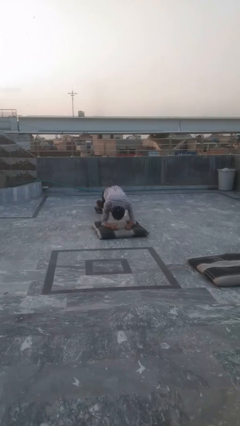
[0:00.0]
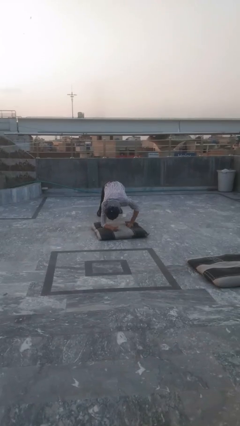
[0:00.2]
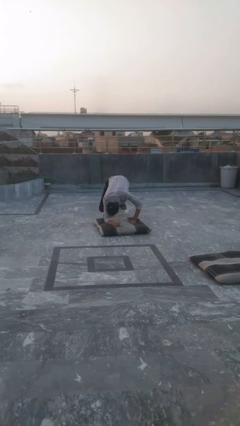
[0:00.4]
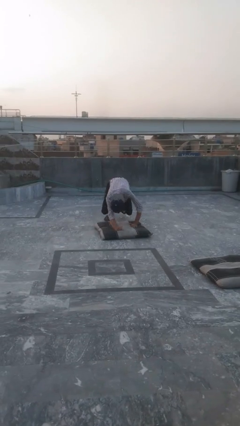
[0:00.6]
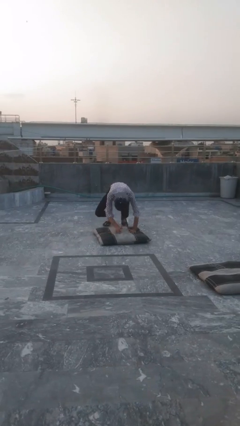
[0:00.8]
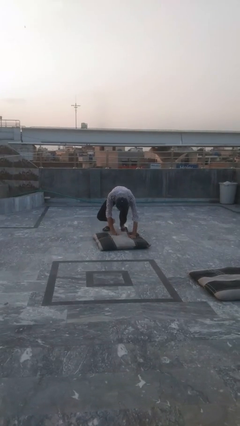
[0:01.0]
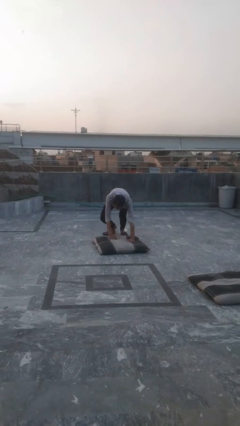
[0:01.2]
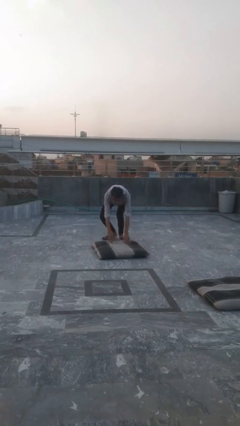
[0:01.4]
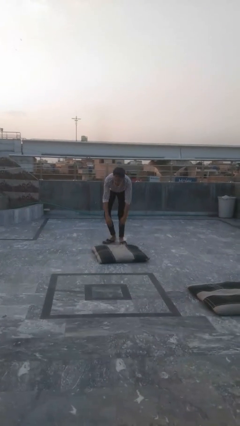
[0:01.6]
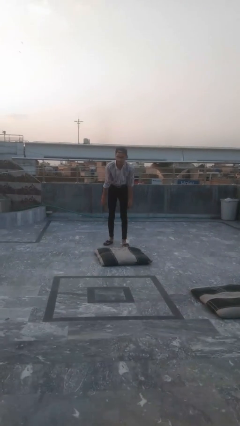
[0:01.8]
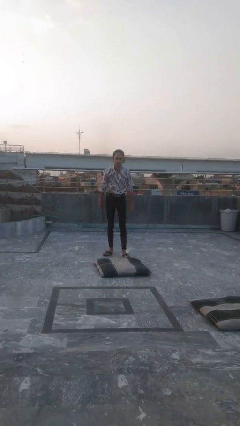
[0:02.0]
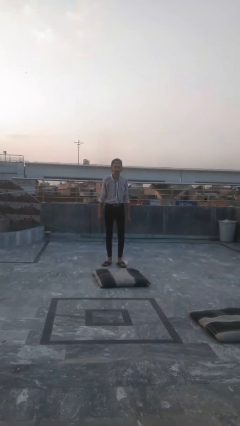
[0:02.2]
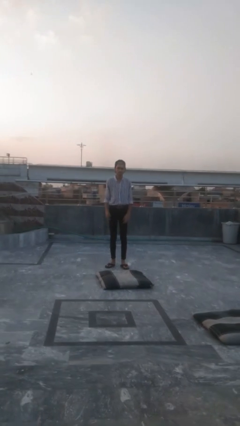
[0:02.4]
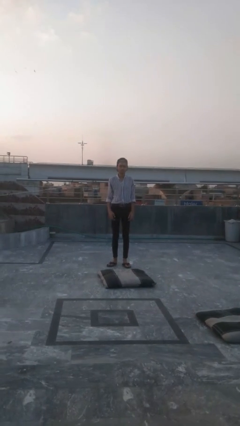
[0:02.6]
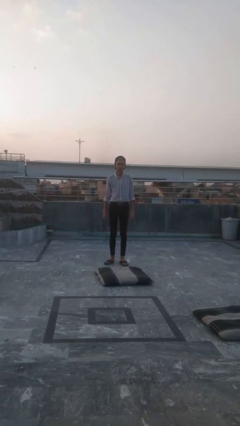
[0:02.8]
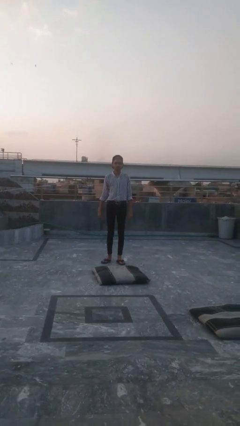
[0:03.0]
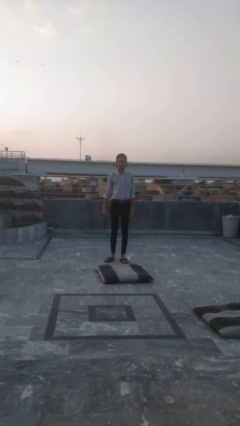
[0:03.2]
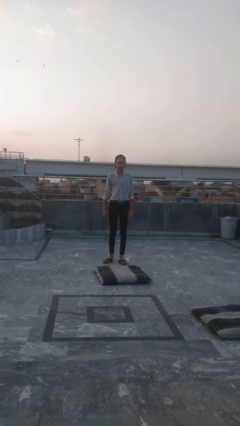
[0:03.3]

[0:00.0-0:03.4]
person stands up from floor

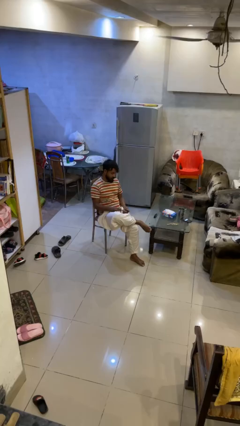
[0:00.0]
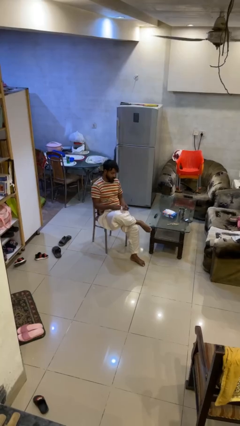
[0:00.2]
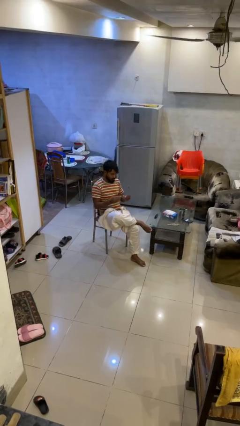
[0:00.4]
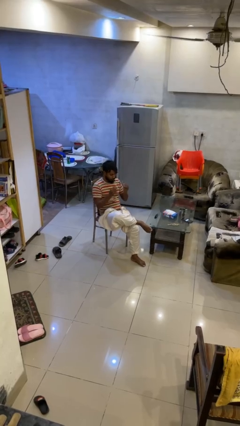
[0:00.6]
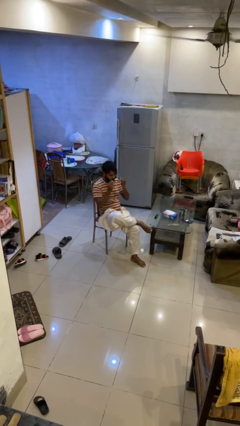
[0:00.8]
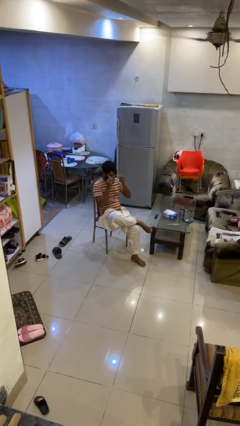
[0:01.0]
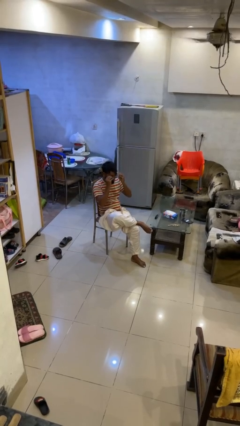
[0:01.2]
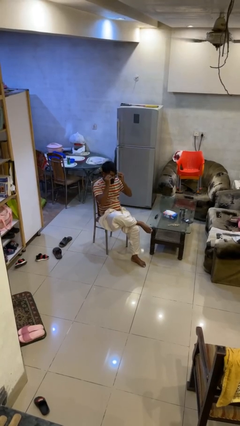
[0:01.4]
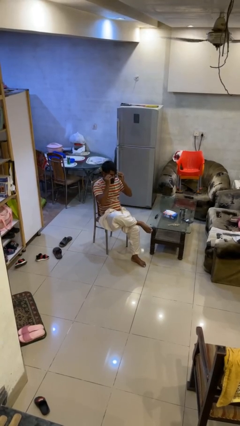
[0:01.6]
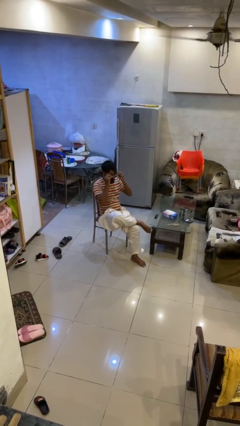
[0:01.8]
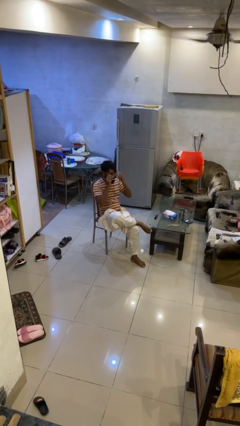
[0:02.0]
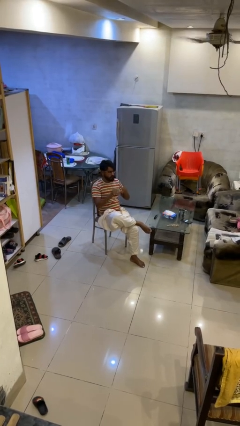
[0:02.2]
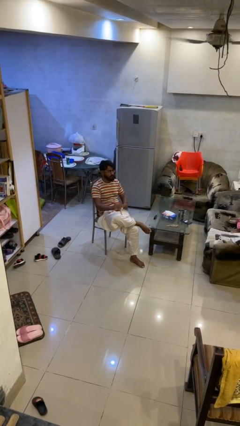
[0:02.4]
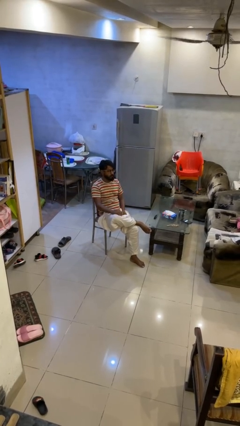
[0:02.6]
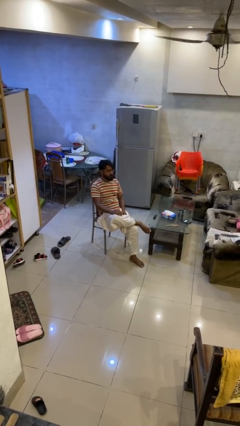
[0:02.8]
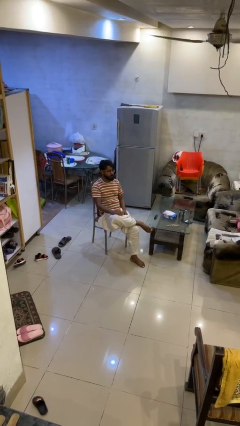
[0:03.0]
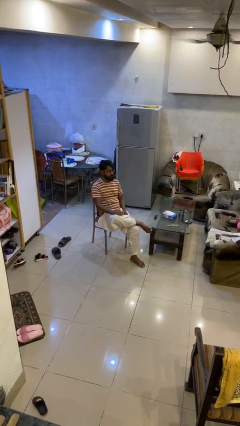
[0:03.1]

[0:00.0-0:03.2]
person puts on glasses

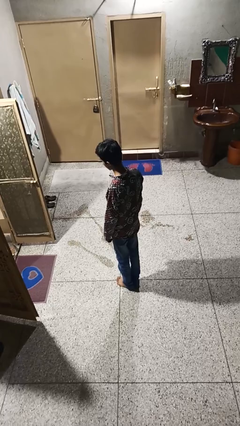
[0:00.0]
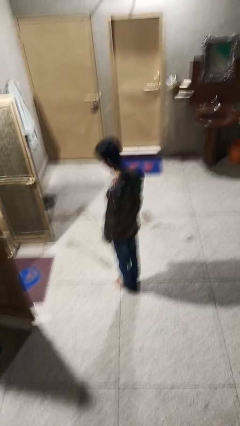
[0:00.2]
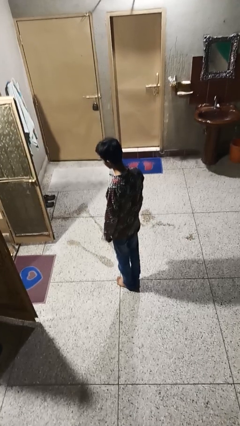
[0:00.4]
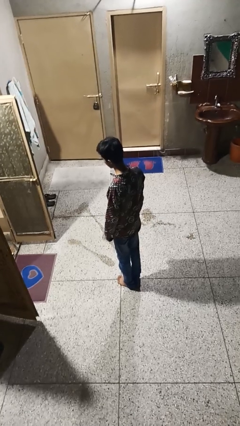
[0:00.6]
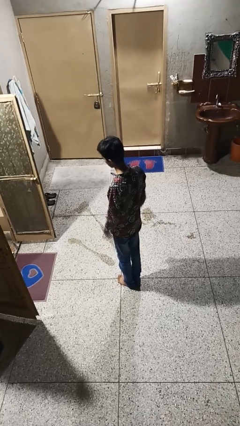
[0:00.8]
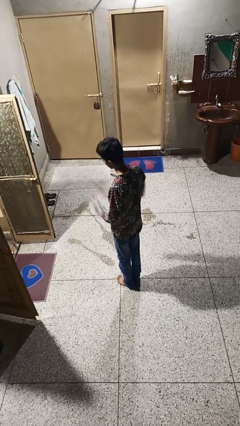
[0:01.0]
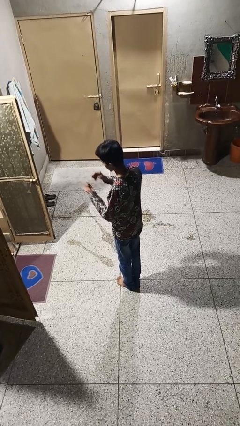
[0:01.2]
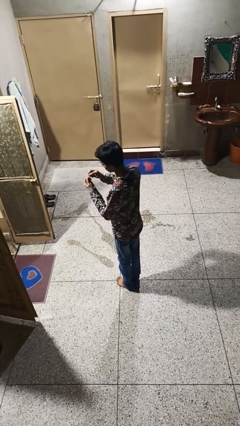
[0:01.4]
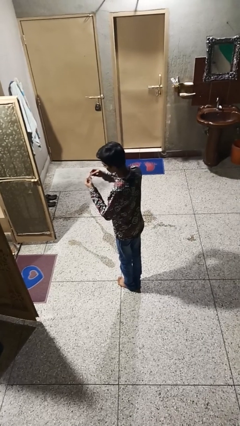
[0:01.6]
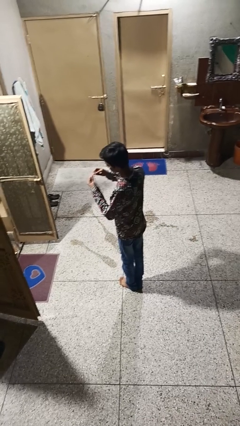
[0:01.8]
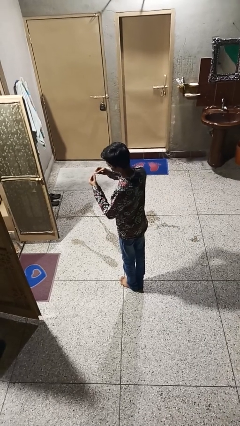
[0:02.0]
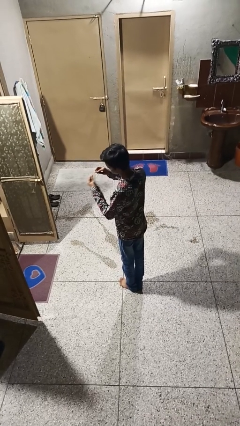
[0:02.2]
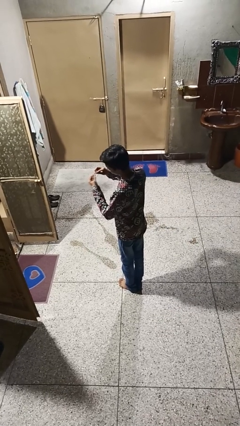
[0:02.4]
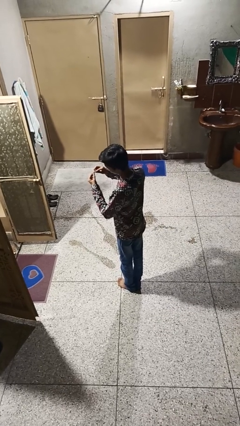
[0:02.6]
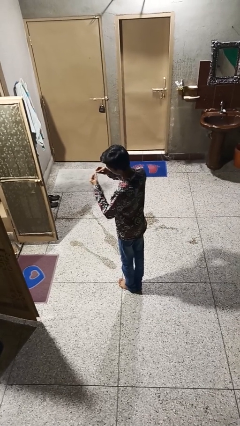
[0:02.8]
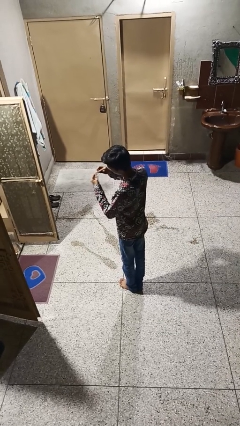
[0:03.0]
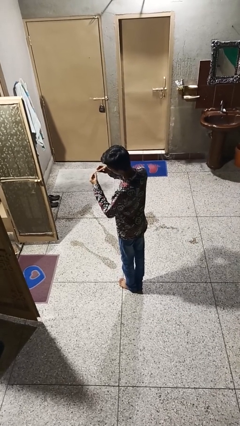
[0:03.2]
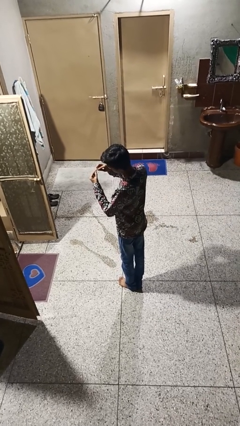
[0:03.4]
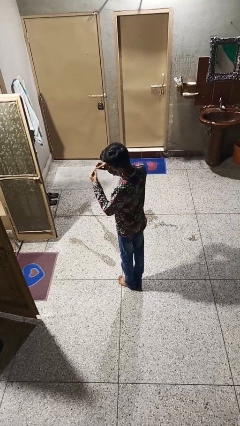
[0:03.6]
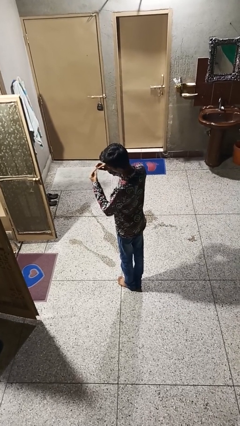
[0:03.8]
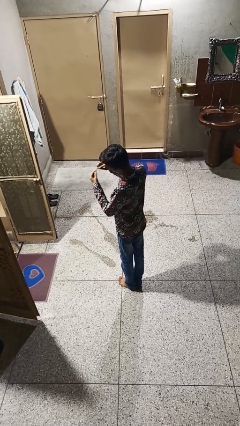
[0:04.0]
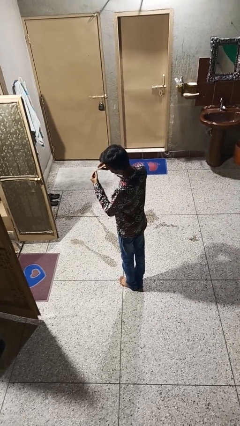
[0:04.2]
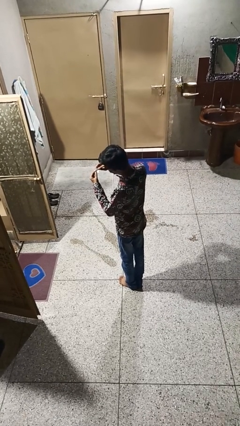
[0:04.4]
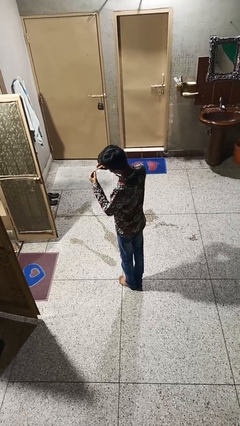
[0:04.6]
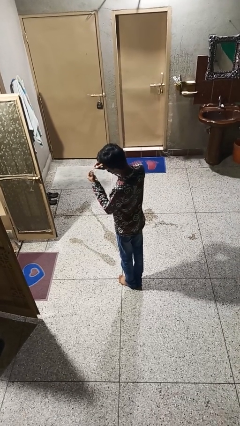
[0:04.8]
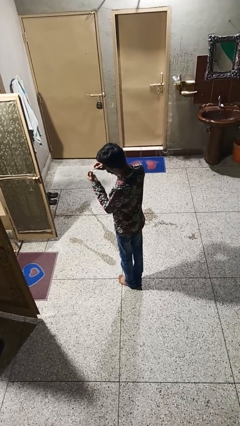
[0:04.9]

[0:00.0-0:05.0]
person files fingernails

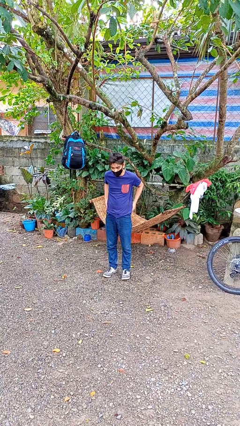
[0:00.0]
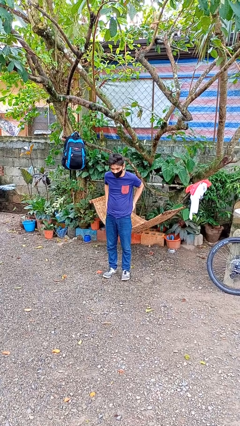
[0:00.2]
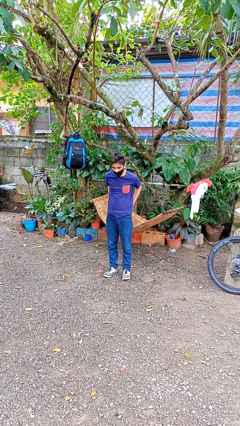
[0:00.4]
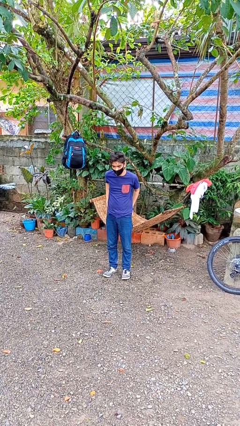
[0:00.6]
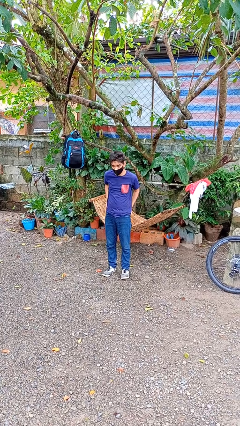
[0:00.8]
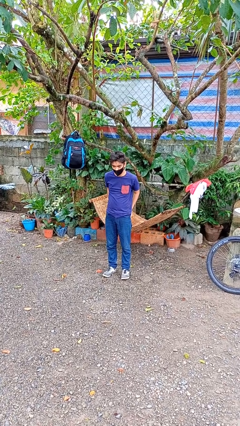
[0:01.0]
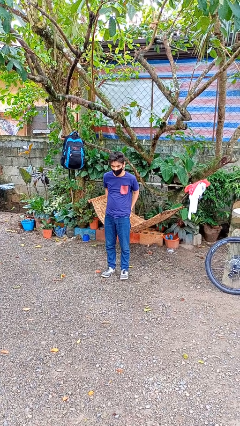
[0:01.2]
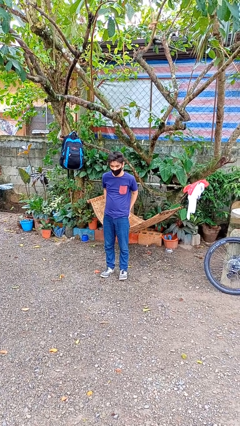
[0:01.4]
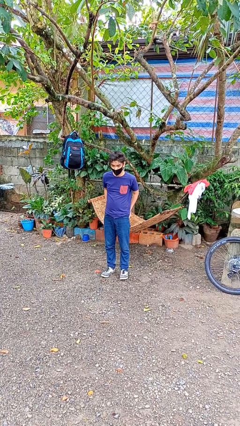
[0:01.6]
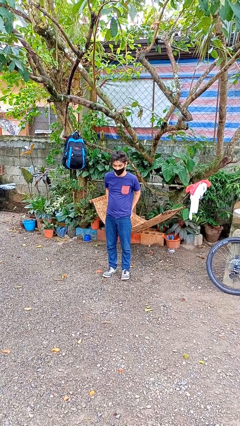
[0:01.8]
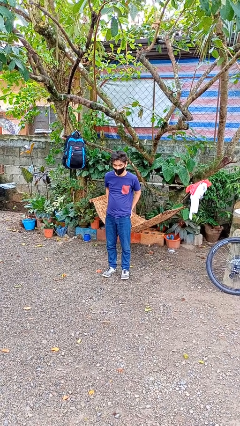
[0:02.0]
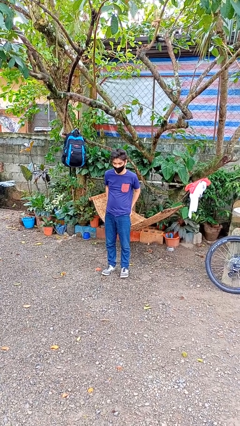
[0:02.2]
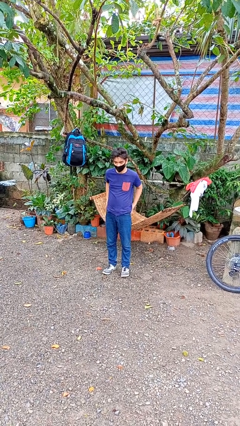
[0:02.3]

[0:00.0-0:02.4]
person puts hands in back pockets

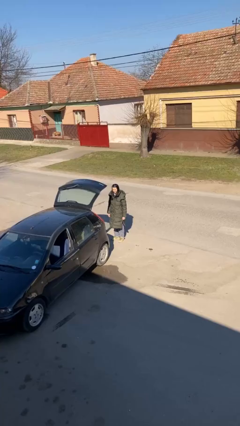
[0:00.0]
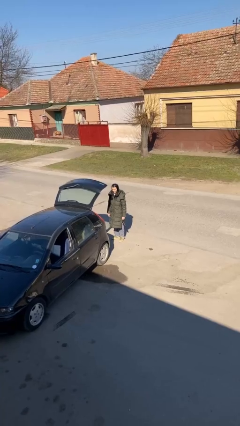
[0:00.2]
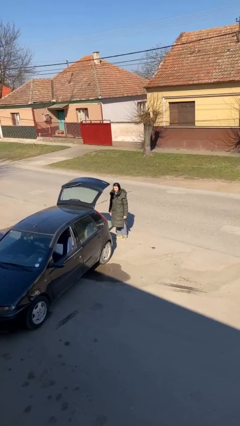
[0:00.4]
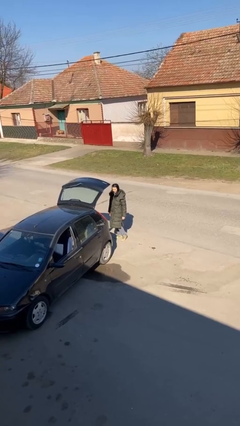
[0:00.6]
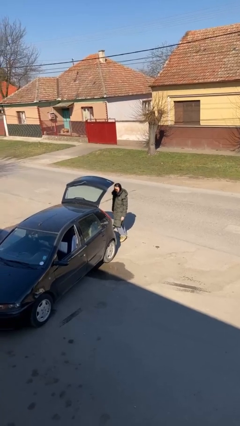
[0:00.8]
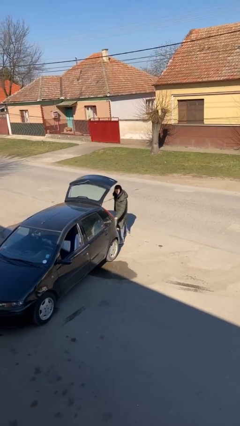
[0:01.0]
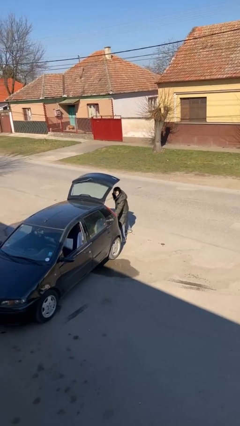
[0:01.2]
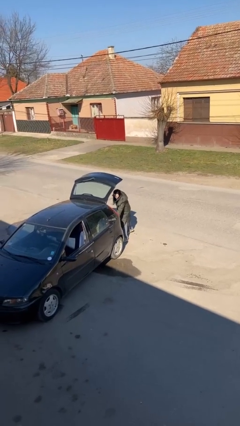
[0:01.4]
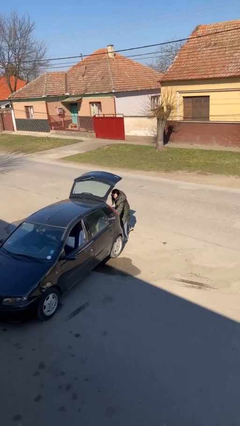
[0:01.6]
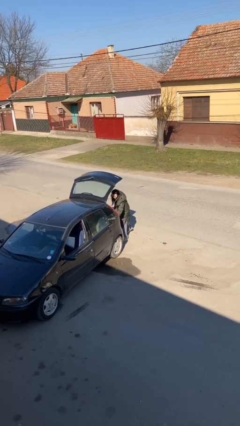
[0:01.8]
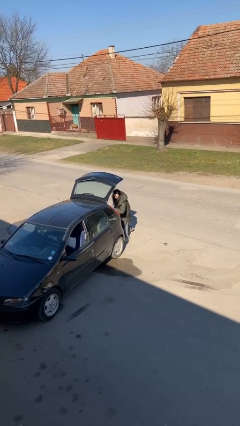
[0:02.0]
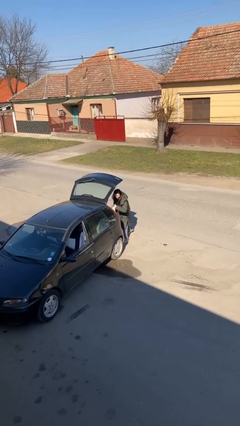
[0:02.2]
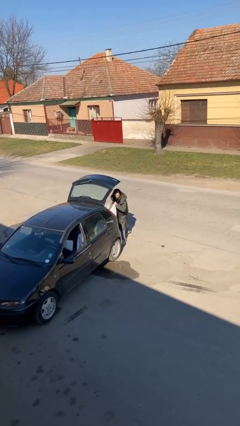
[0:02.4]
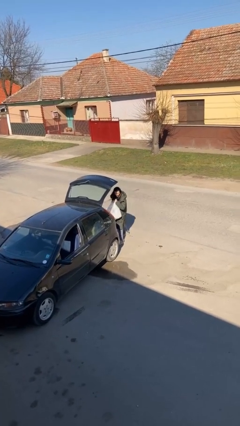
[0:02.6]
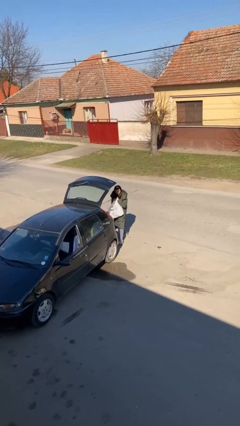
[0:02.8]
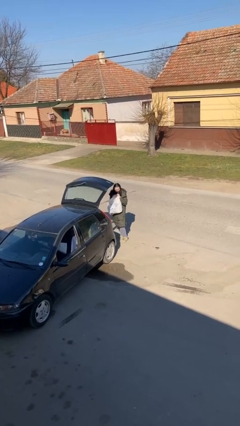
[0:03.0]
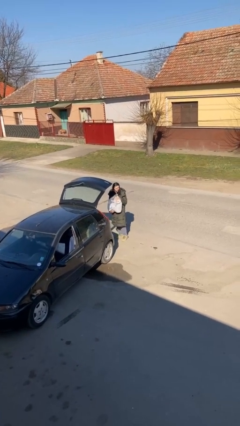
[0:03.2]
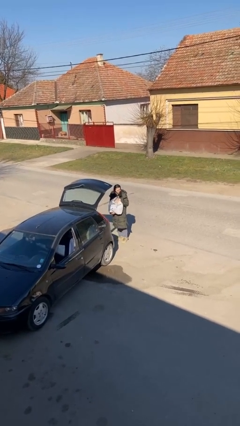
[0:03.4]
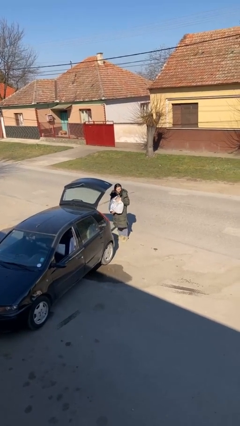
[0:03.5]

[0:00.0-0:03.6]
person unloads car
